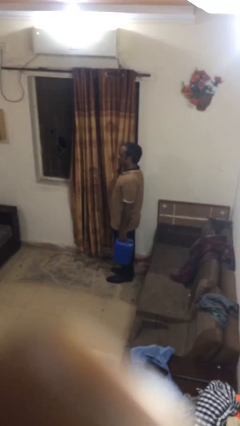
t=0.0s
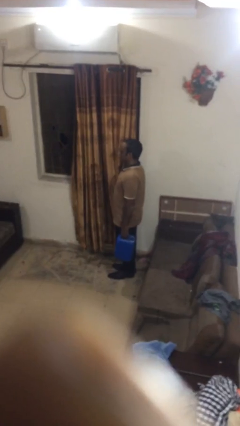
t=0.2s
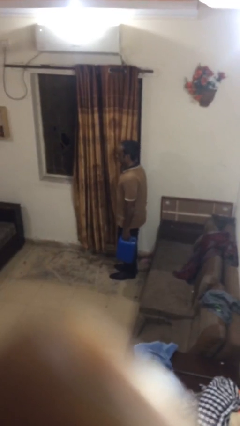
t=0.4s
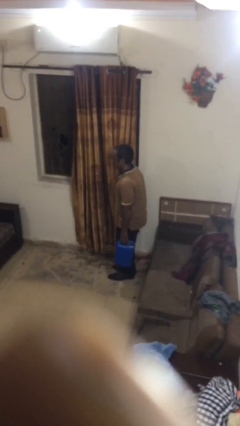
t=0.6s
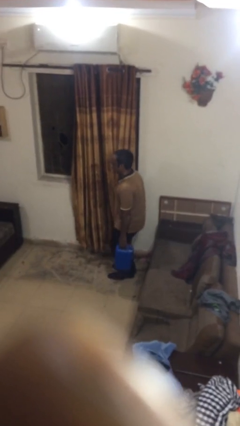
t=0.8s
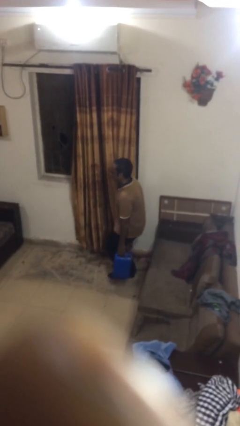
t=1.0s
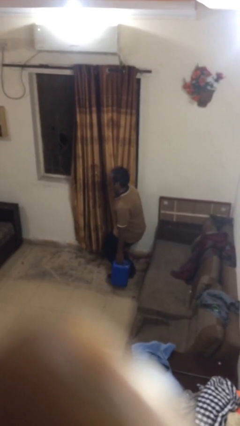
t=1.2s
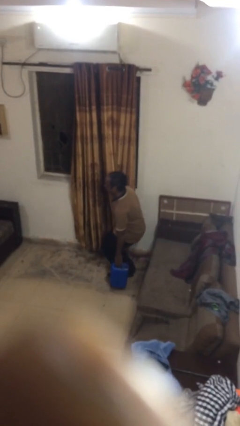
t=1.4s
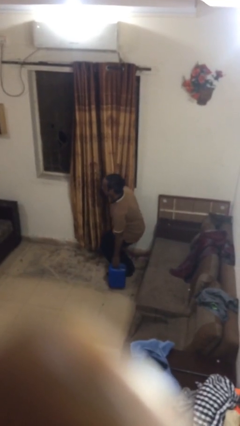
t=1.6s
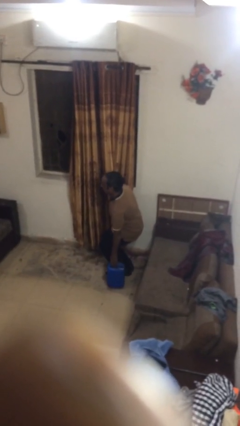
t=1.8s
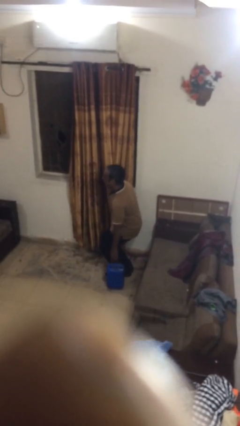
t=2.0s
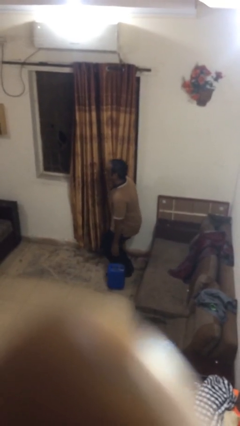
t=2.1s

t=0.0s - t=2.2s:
person puts down object on floor

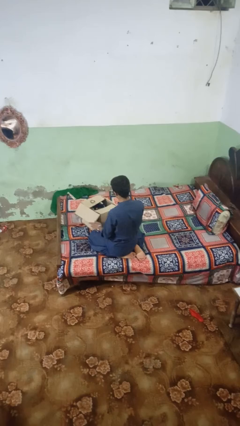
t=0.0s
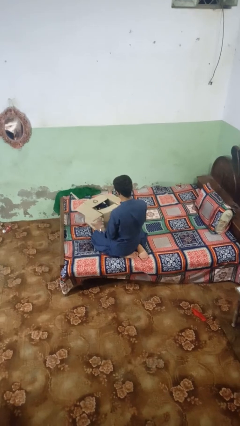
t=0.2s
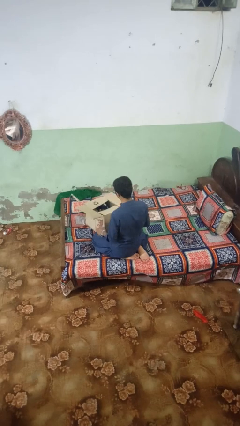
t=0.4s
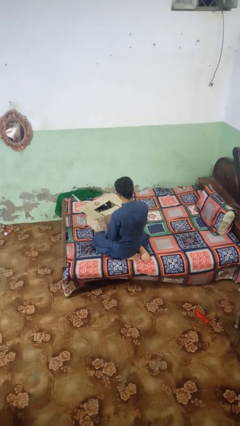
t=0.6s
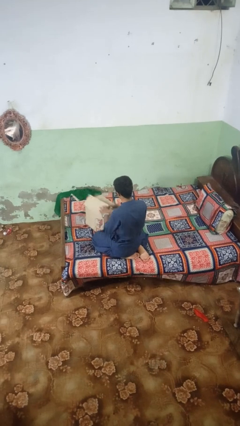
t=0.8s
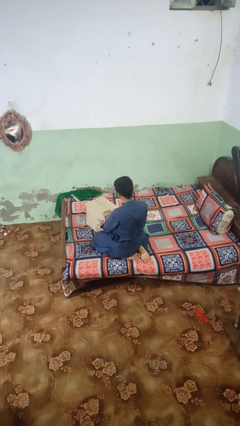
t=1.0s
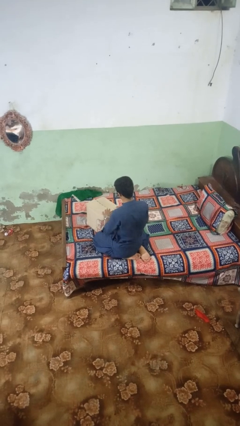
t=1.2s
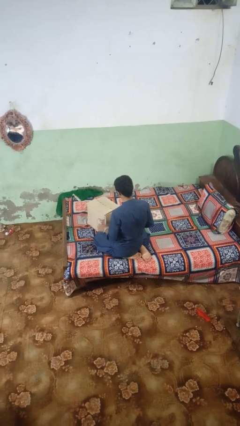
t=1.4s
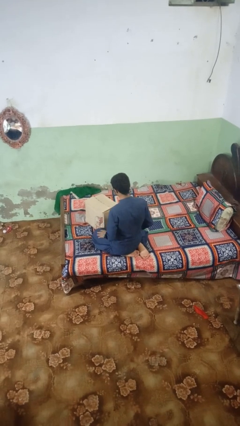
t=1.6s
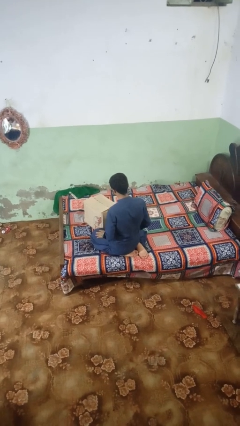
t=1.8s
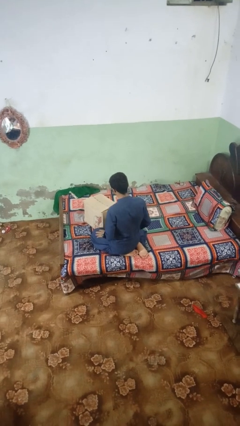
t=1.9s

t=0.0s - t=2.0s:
person closes box

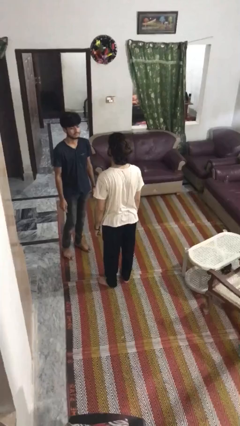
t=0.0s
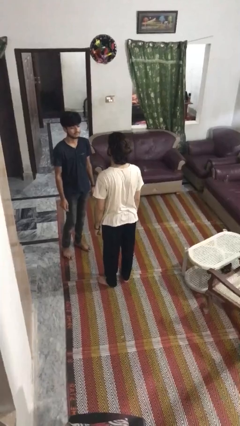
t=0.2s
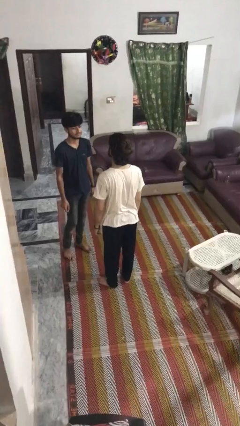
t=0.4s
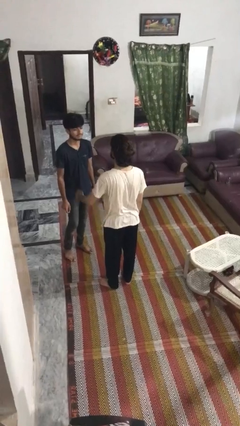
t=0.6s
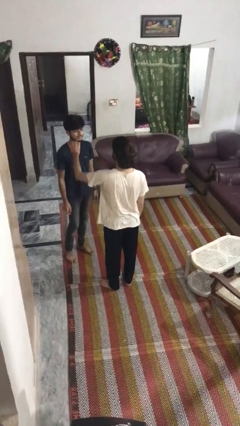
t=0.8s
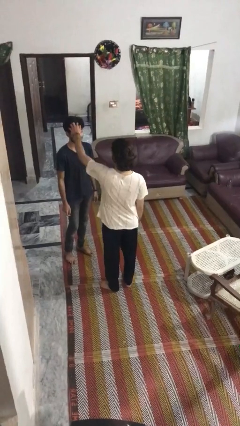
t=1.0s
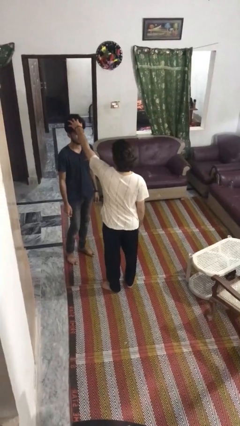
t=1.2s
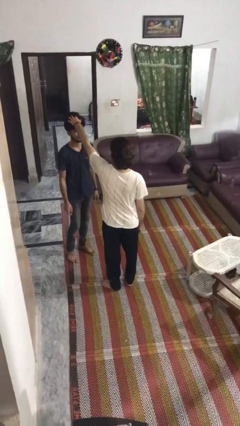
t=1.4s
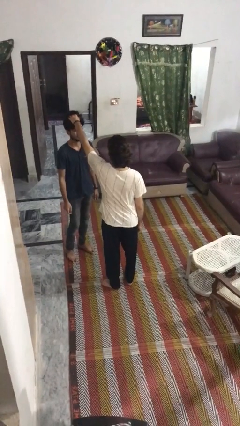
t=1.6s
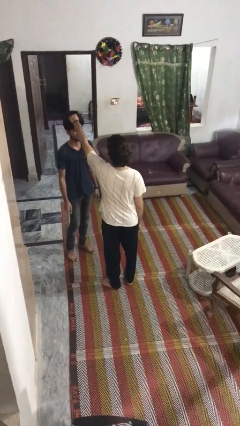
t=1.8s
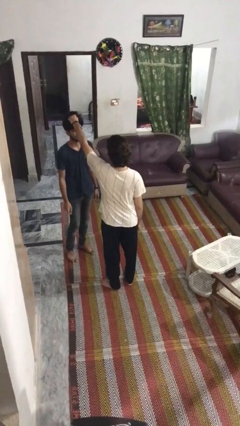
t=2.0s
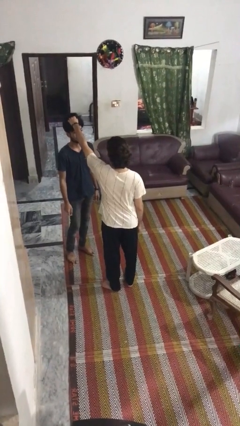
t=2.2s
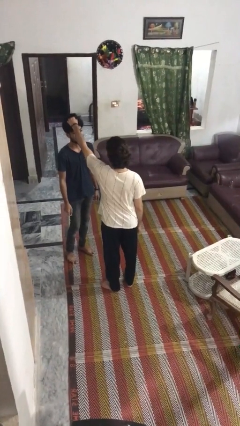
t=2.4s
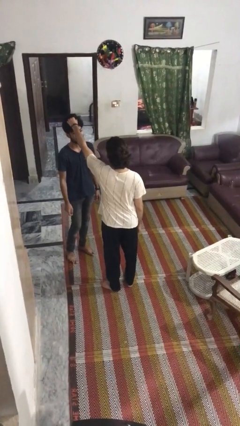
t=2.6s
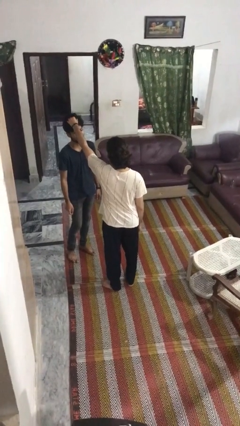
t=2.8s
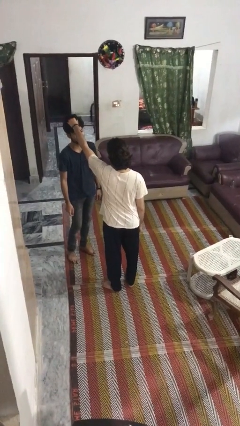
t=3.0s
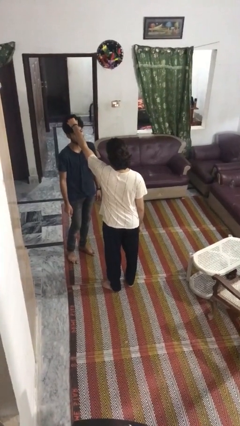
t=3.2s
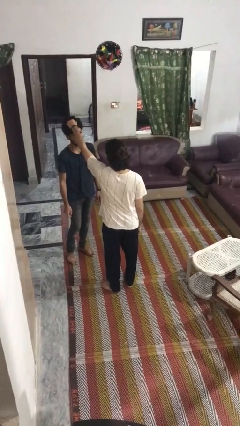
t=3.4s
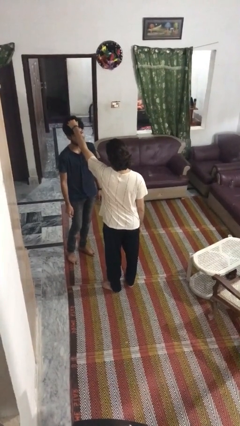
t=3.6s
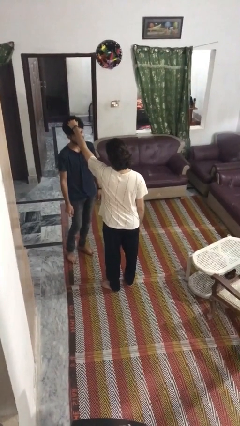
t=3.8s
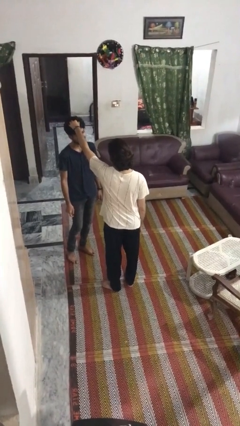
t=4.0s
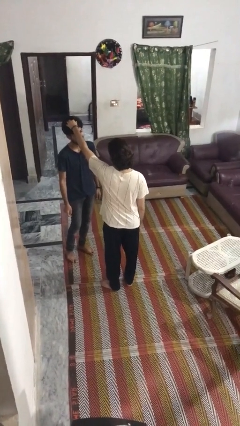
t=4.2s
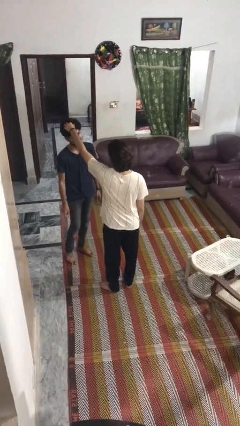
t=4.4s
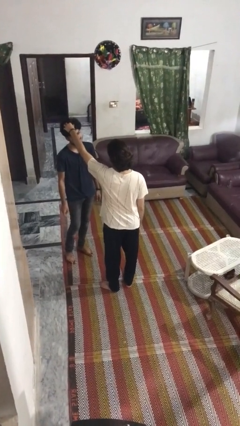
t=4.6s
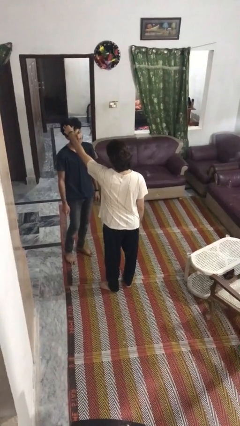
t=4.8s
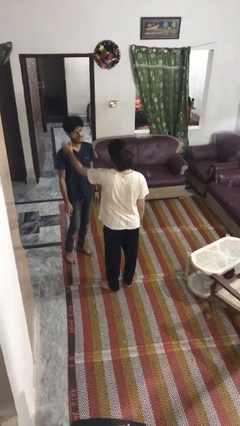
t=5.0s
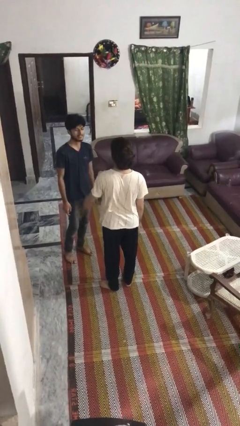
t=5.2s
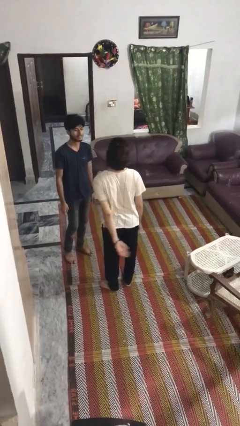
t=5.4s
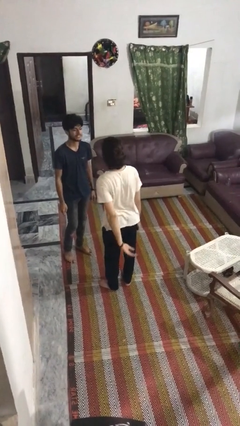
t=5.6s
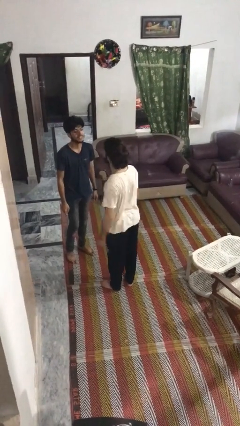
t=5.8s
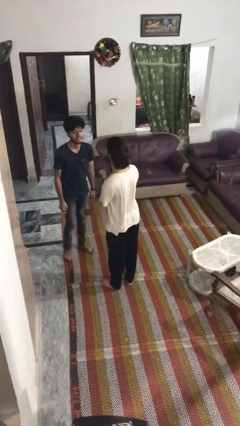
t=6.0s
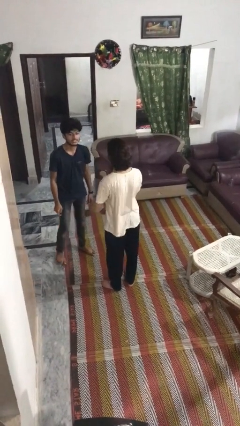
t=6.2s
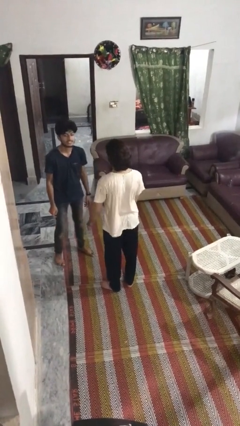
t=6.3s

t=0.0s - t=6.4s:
person grabs person by hair

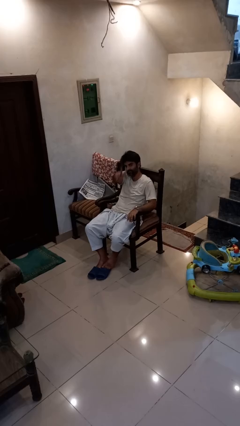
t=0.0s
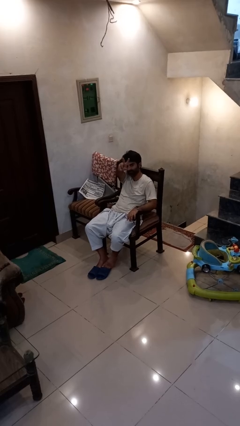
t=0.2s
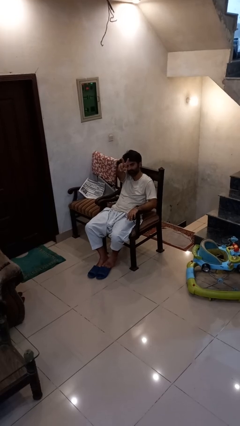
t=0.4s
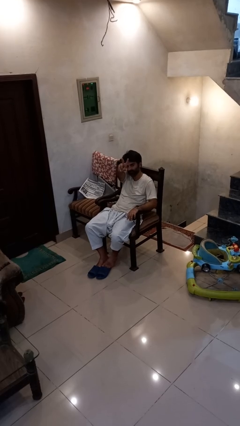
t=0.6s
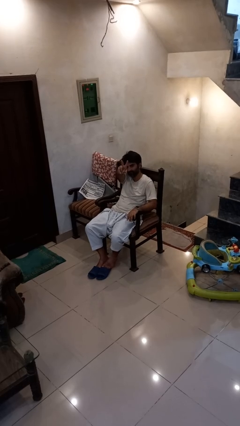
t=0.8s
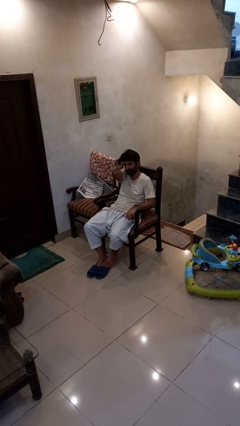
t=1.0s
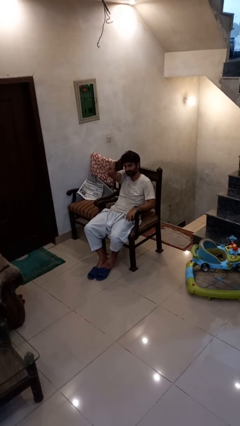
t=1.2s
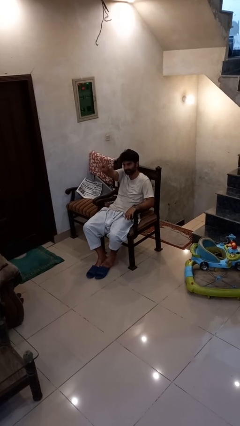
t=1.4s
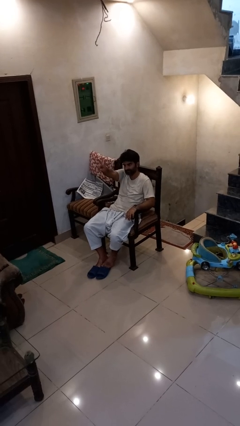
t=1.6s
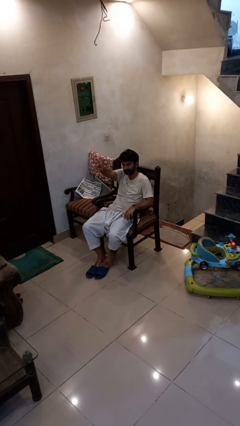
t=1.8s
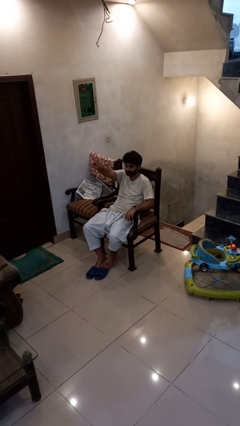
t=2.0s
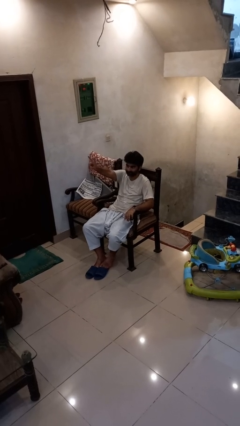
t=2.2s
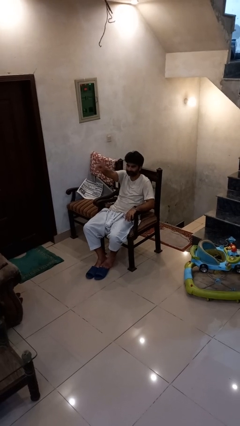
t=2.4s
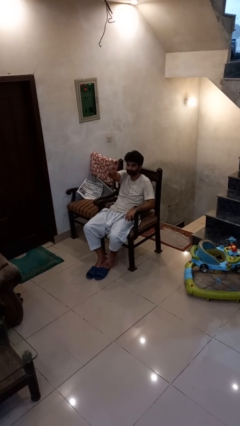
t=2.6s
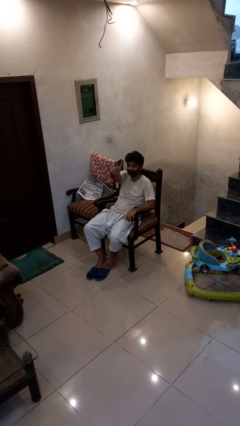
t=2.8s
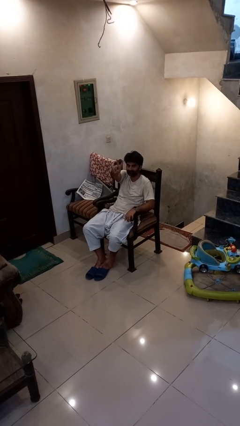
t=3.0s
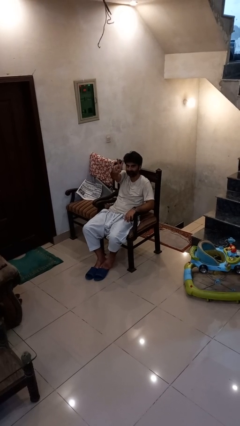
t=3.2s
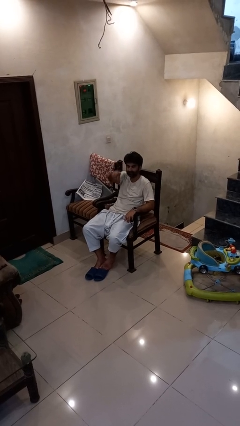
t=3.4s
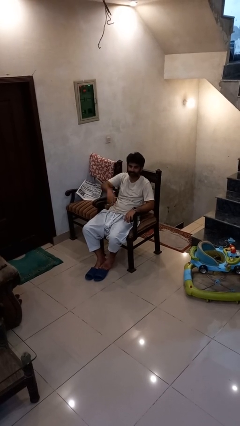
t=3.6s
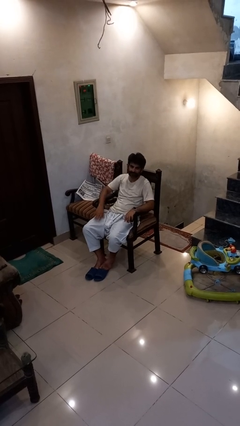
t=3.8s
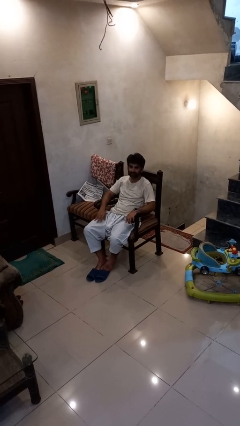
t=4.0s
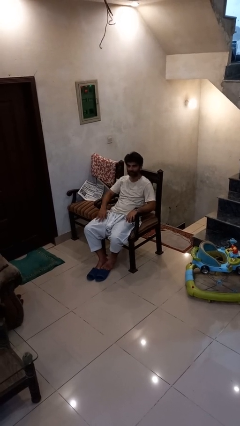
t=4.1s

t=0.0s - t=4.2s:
person gestures peace

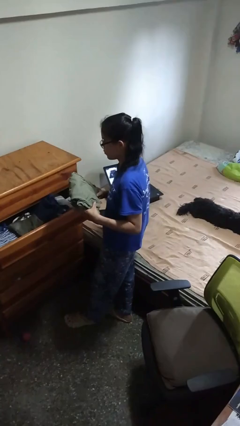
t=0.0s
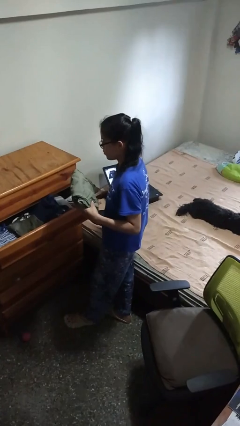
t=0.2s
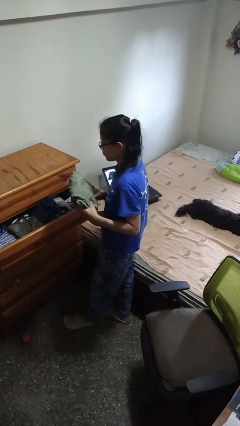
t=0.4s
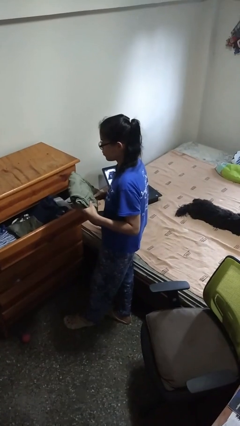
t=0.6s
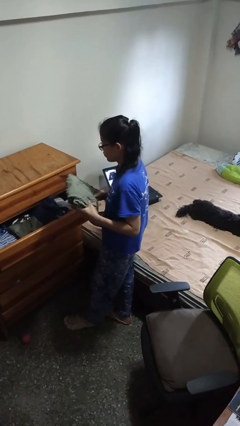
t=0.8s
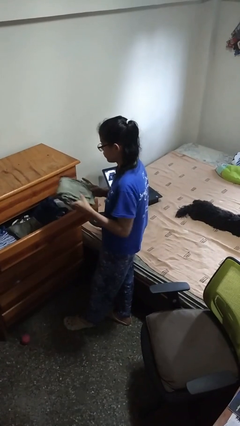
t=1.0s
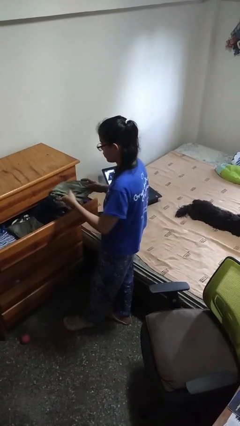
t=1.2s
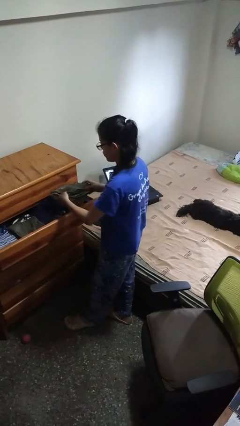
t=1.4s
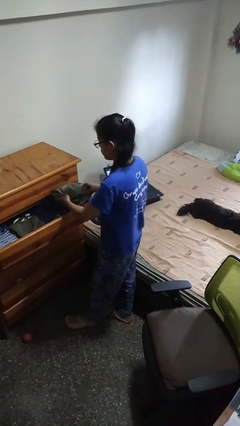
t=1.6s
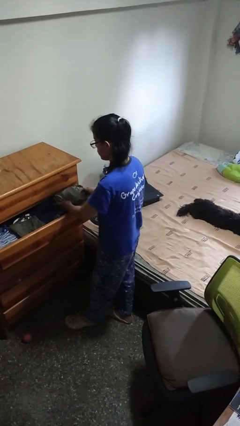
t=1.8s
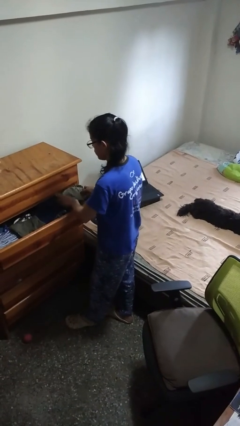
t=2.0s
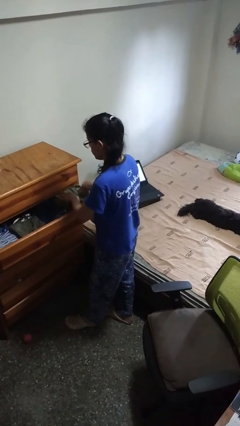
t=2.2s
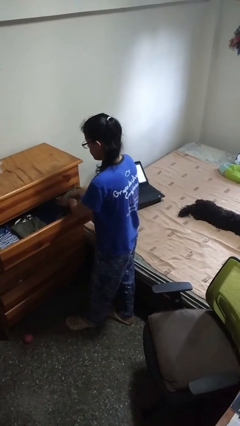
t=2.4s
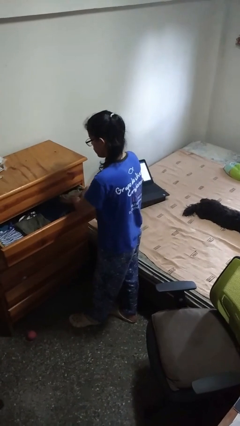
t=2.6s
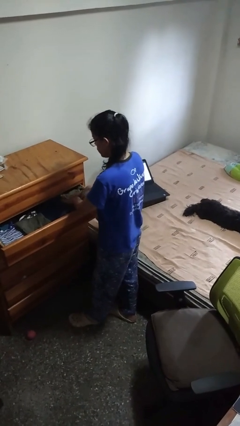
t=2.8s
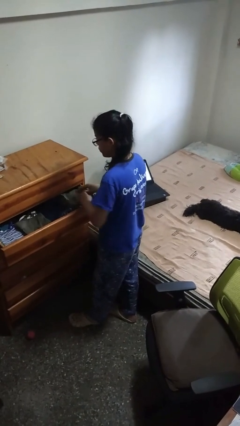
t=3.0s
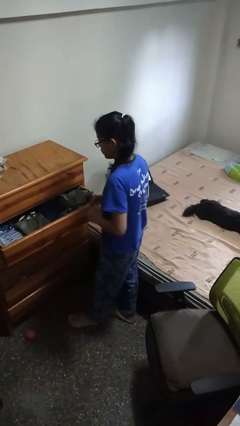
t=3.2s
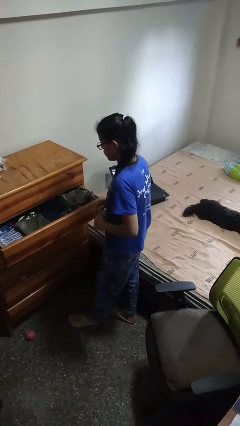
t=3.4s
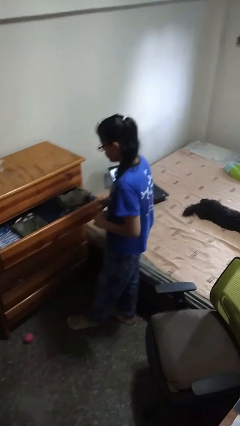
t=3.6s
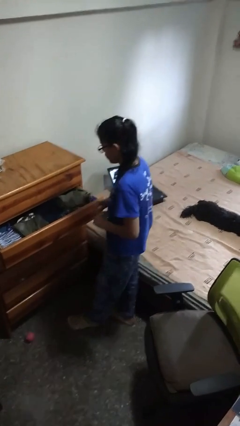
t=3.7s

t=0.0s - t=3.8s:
person puts clothes into dresser
